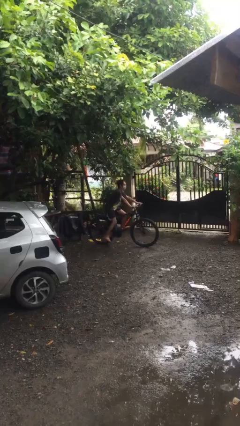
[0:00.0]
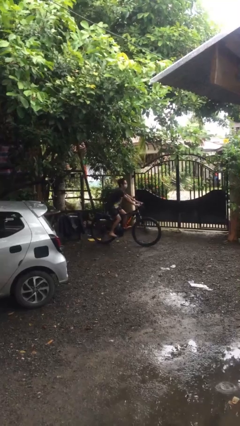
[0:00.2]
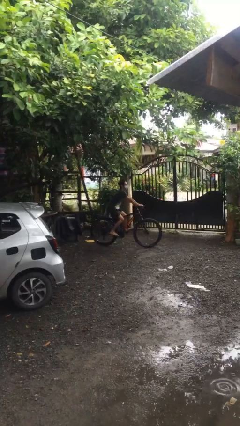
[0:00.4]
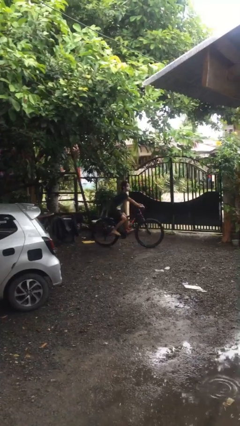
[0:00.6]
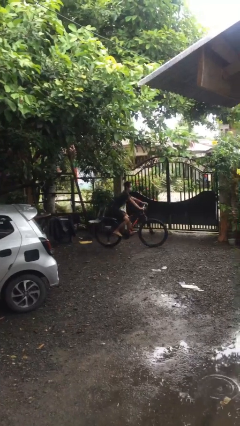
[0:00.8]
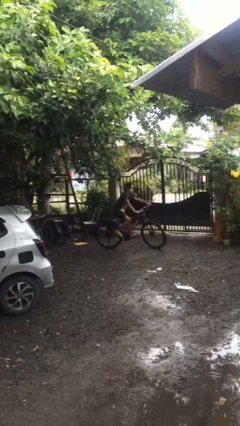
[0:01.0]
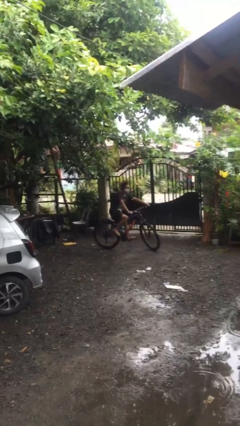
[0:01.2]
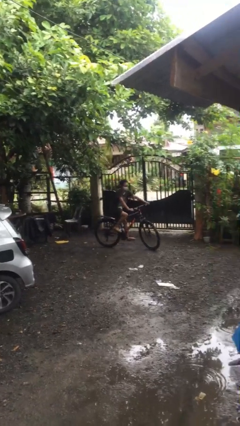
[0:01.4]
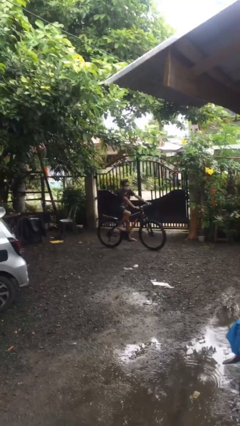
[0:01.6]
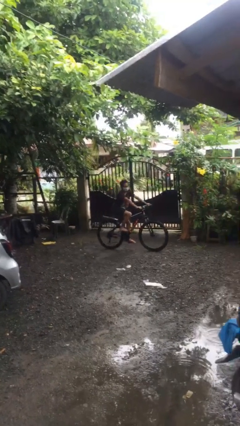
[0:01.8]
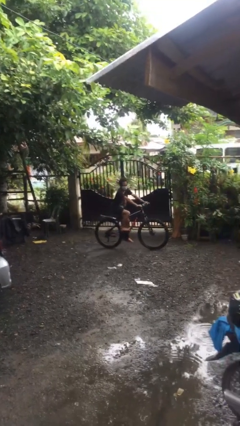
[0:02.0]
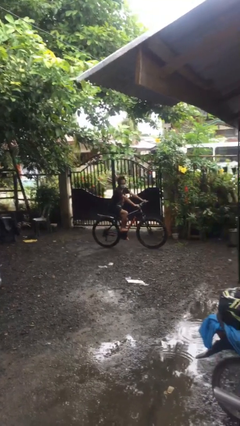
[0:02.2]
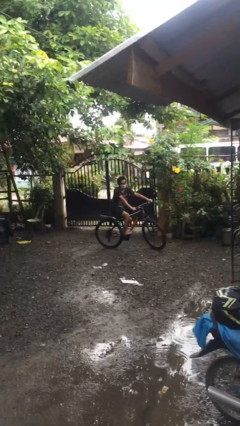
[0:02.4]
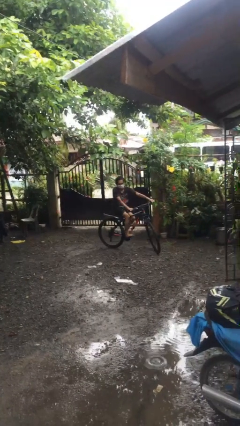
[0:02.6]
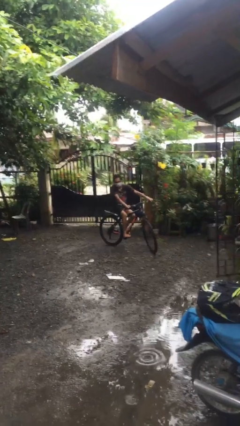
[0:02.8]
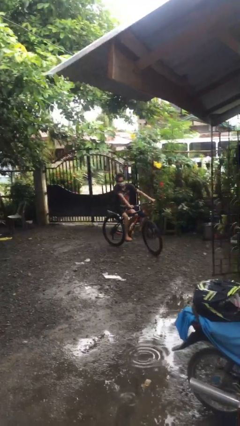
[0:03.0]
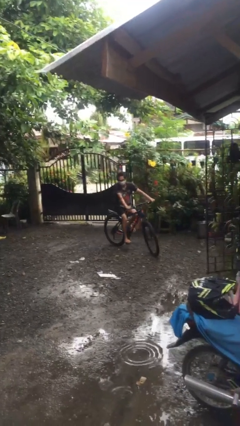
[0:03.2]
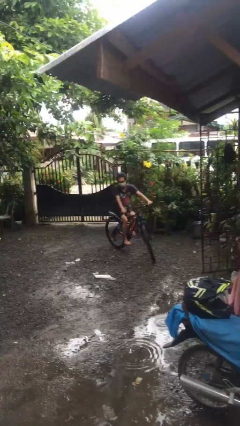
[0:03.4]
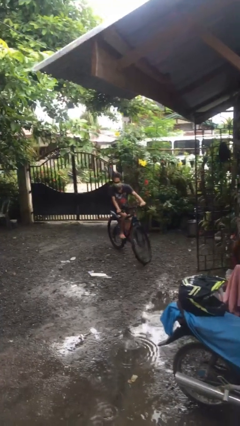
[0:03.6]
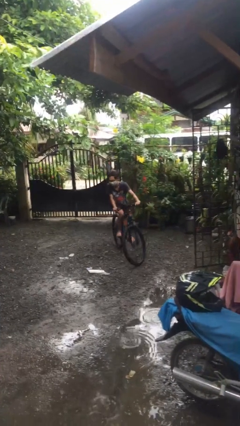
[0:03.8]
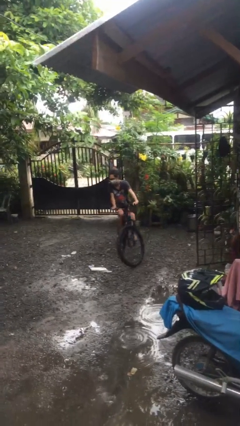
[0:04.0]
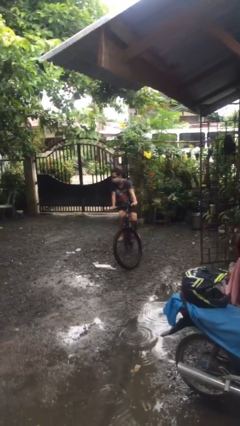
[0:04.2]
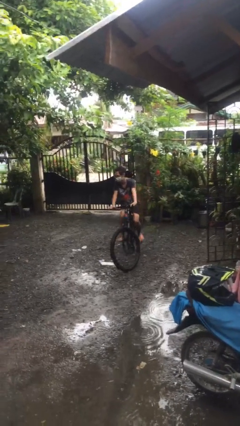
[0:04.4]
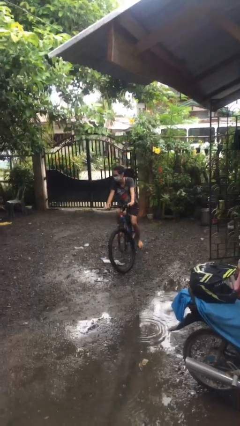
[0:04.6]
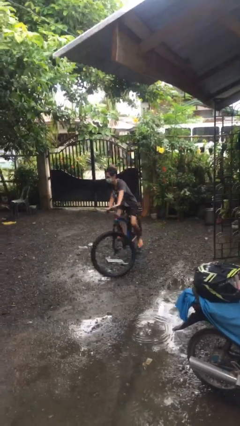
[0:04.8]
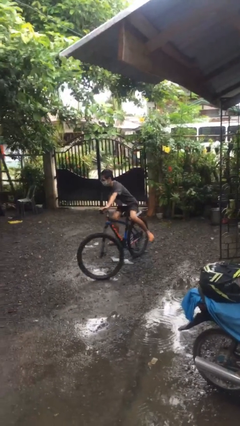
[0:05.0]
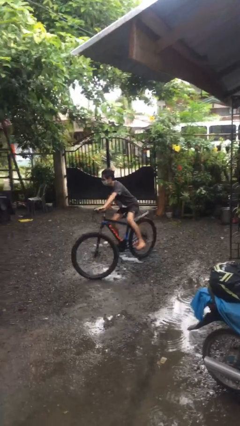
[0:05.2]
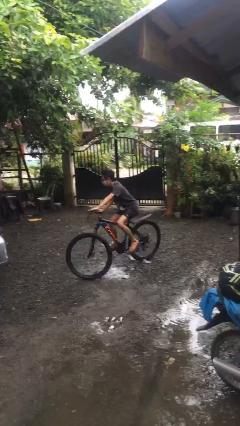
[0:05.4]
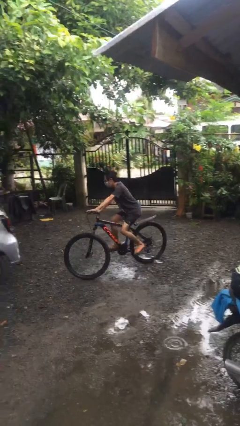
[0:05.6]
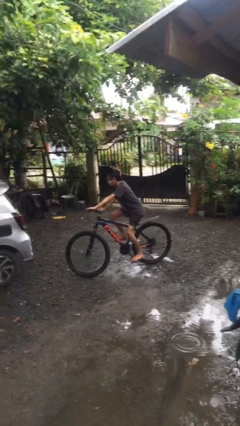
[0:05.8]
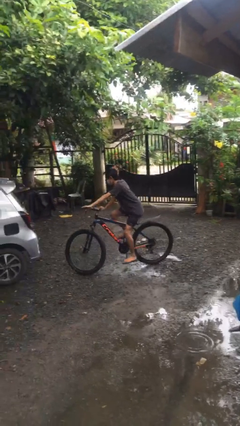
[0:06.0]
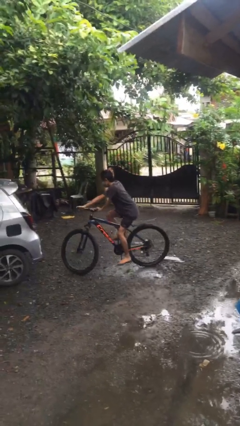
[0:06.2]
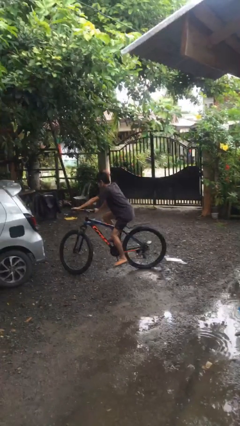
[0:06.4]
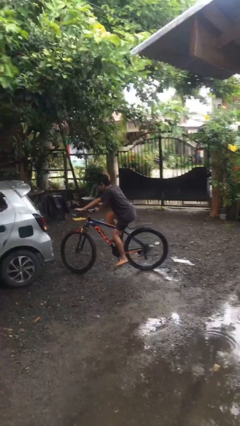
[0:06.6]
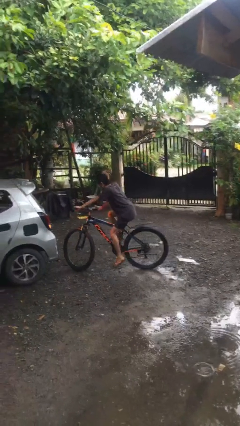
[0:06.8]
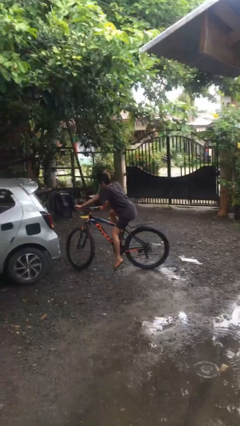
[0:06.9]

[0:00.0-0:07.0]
person rides bicycle

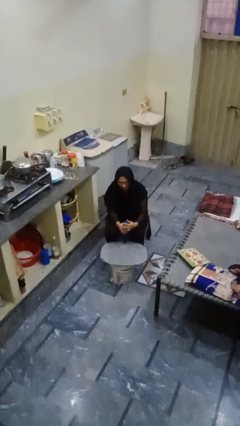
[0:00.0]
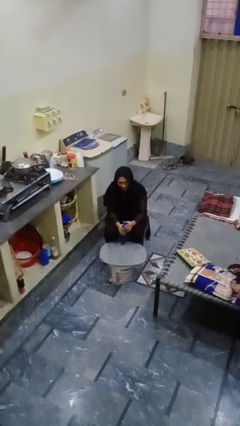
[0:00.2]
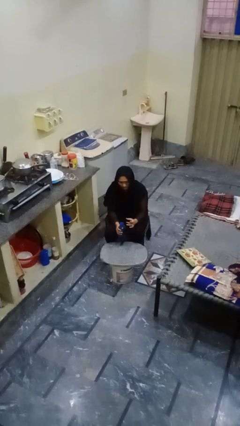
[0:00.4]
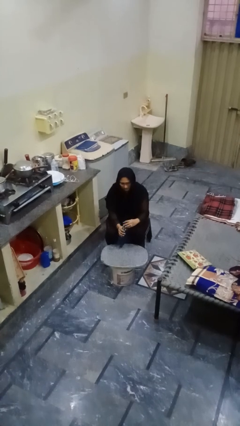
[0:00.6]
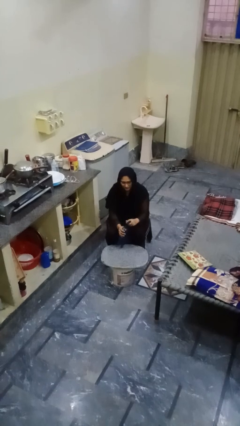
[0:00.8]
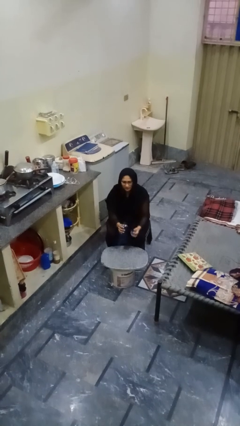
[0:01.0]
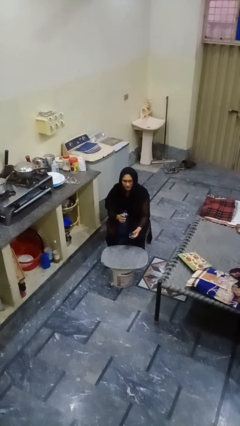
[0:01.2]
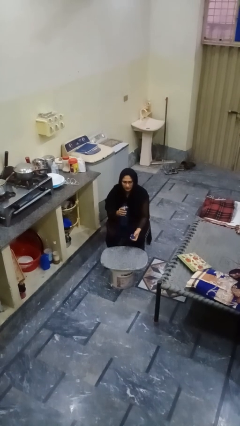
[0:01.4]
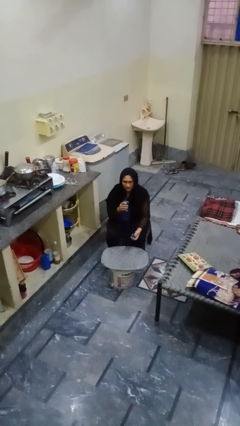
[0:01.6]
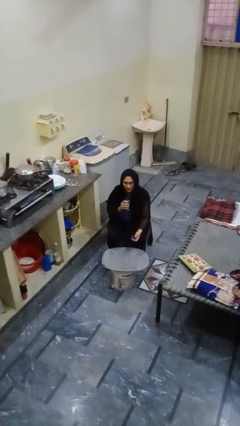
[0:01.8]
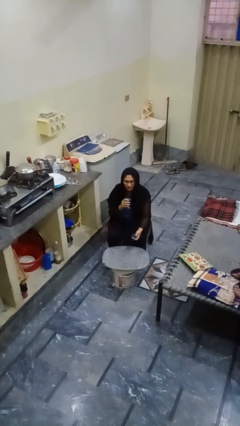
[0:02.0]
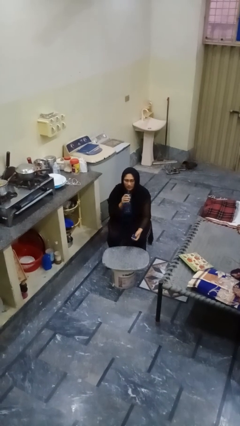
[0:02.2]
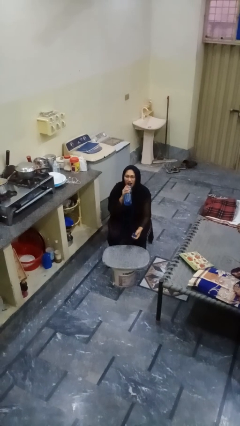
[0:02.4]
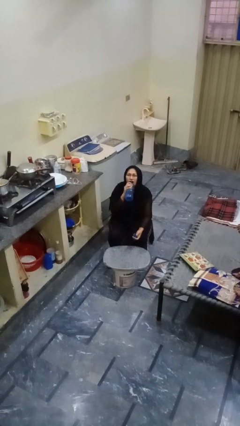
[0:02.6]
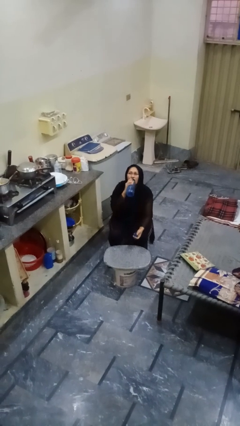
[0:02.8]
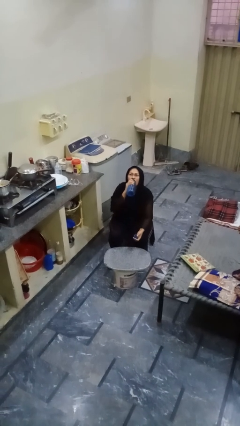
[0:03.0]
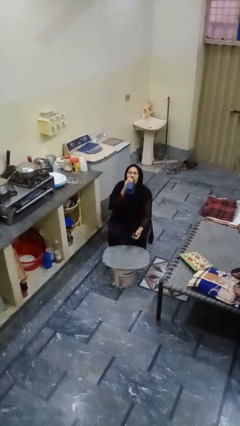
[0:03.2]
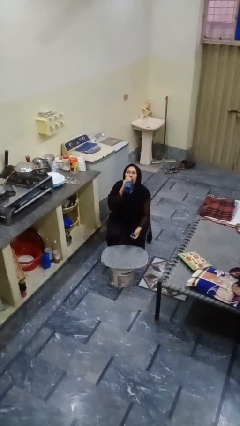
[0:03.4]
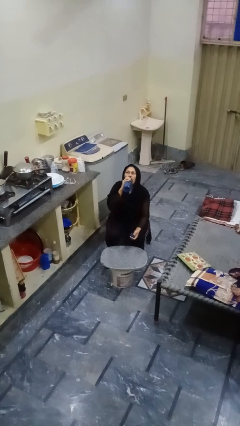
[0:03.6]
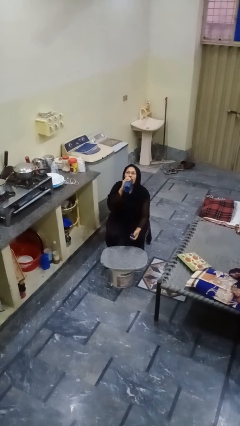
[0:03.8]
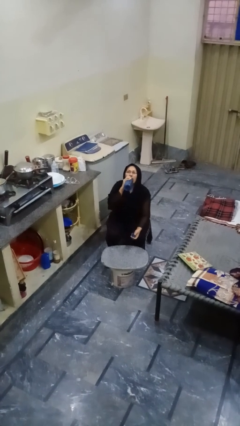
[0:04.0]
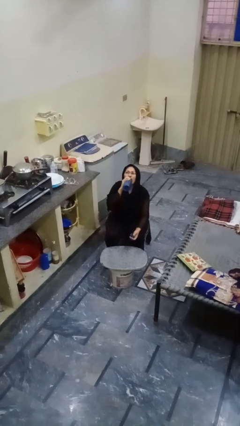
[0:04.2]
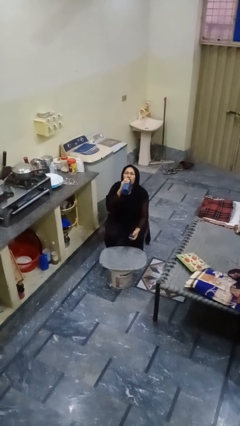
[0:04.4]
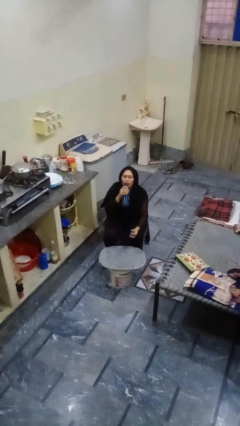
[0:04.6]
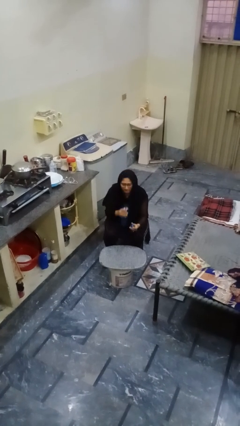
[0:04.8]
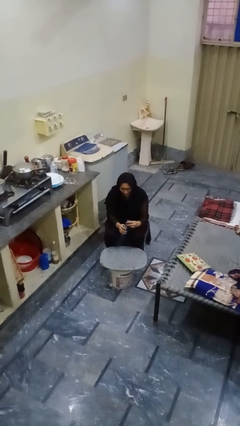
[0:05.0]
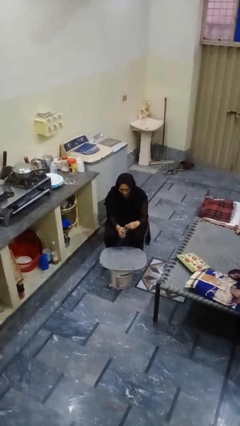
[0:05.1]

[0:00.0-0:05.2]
person drinks from bottle

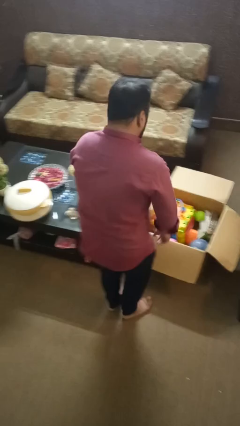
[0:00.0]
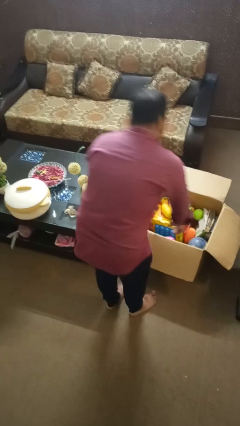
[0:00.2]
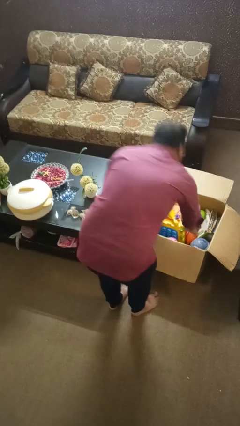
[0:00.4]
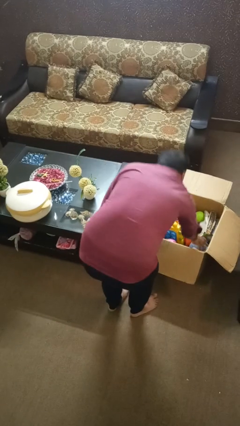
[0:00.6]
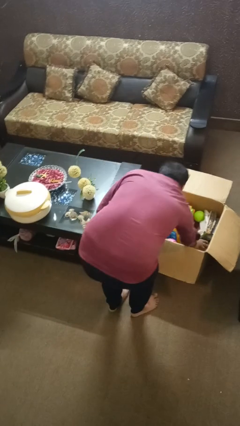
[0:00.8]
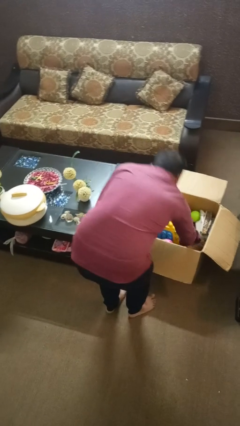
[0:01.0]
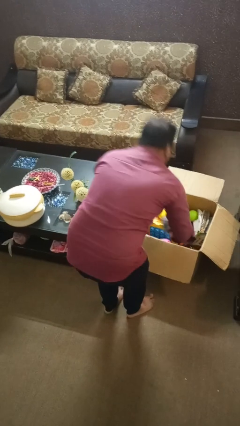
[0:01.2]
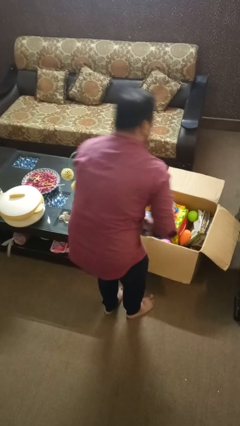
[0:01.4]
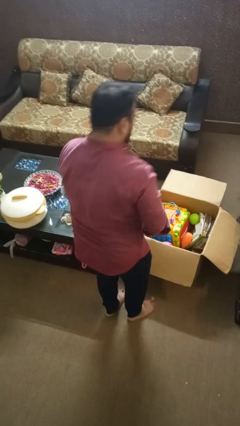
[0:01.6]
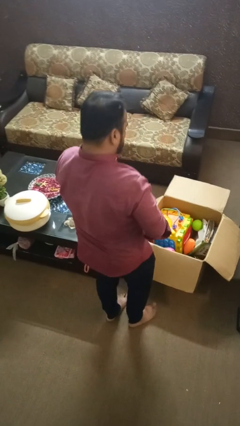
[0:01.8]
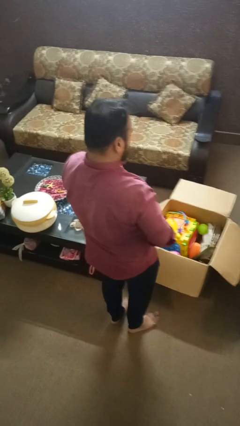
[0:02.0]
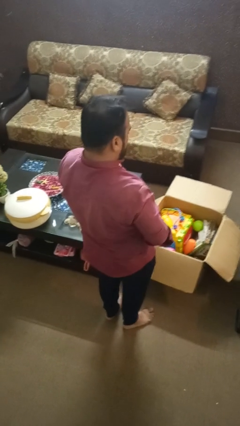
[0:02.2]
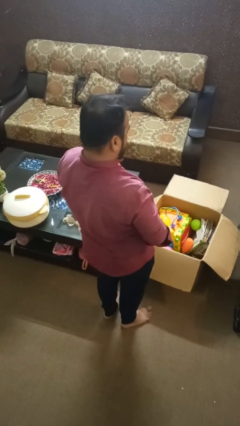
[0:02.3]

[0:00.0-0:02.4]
person takes object from box

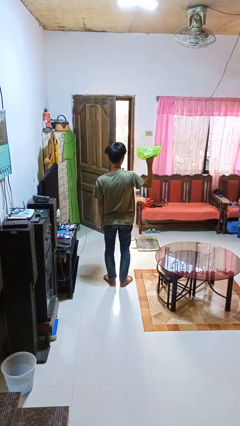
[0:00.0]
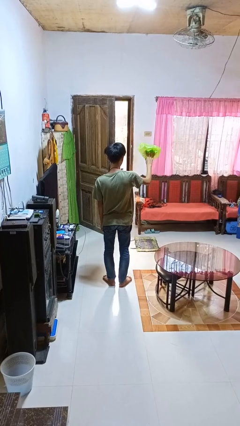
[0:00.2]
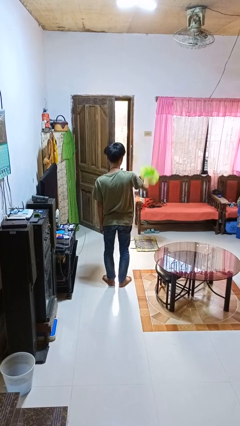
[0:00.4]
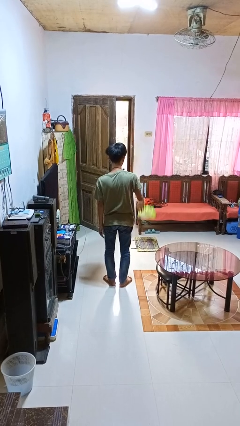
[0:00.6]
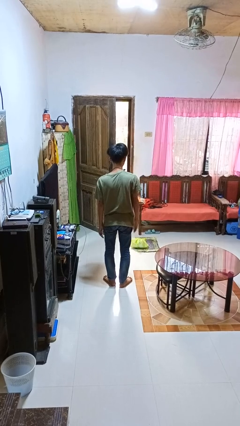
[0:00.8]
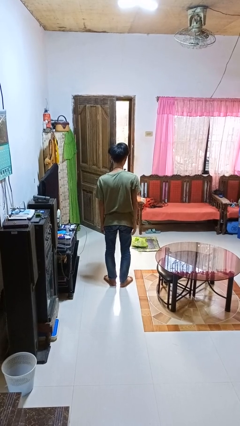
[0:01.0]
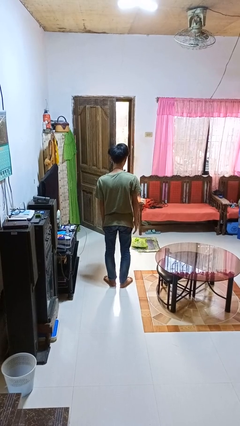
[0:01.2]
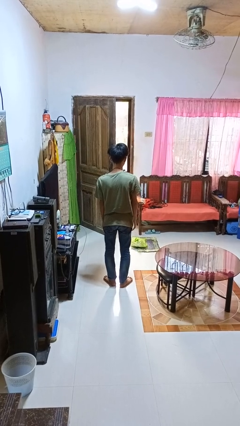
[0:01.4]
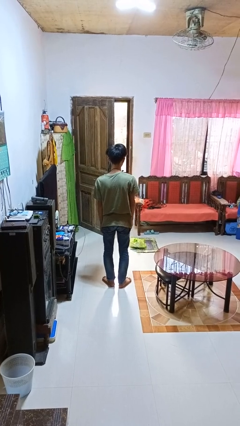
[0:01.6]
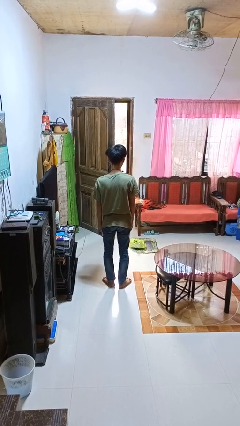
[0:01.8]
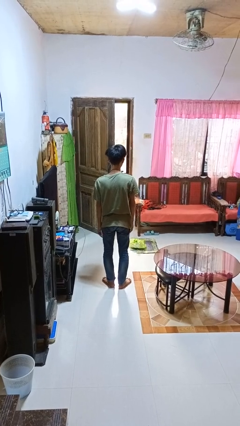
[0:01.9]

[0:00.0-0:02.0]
person throws object to ground

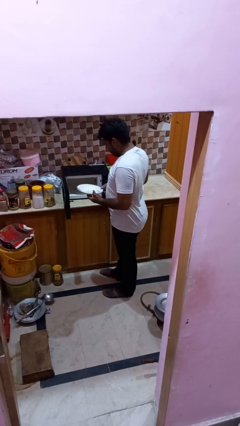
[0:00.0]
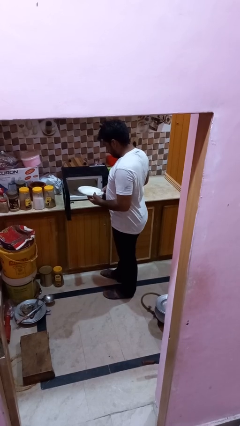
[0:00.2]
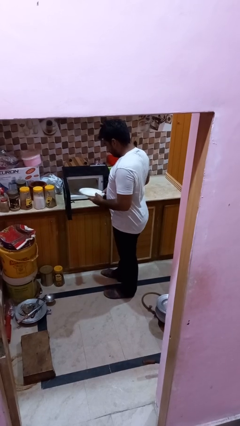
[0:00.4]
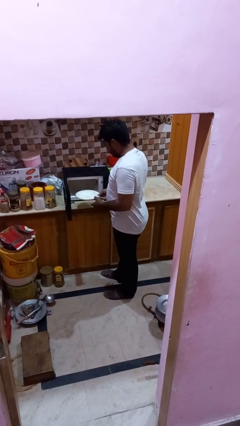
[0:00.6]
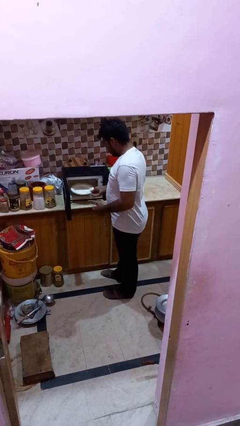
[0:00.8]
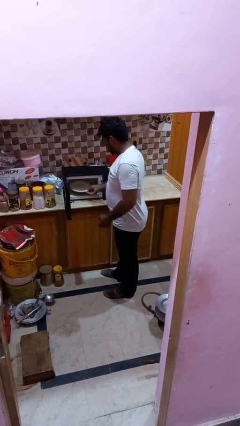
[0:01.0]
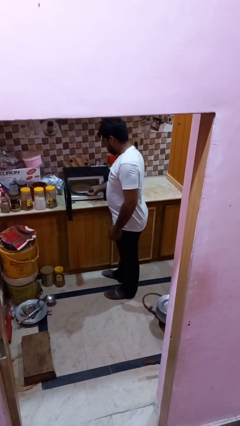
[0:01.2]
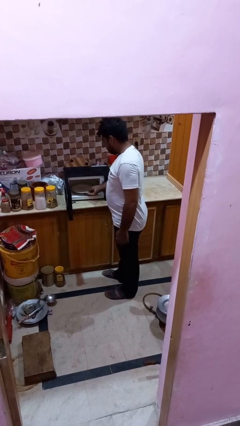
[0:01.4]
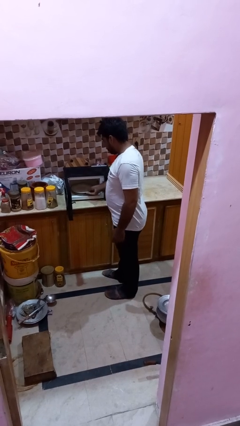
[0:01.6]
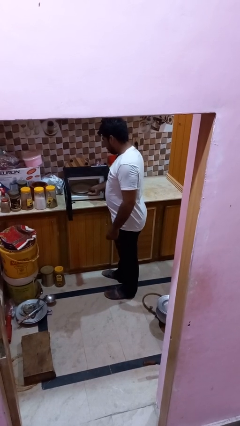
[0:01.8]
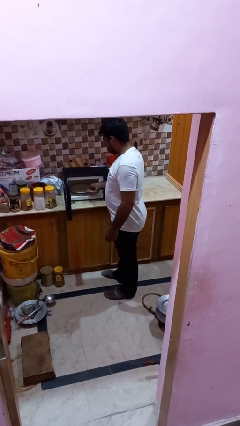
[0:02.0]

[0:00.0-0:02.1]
person puts object into oven
